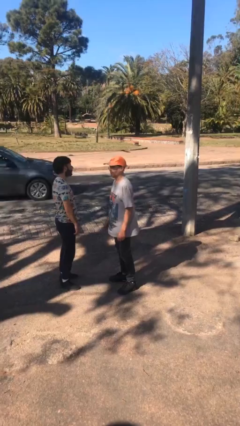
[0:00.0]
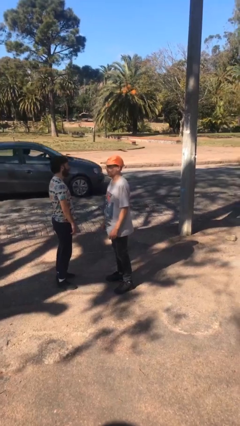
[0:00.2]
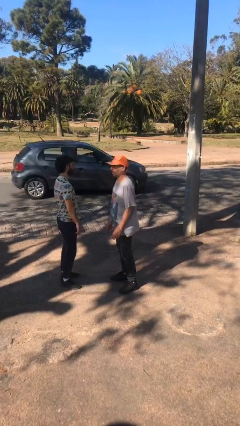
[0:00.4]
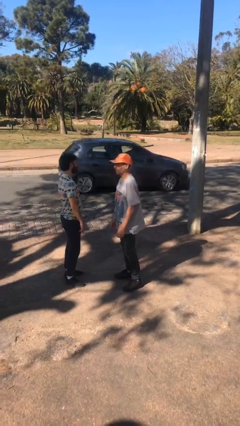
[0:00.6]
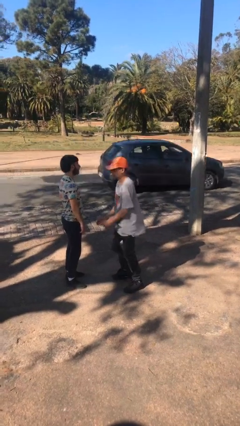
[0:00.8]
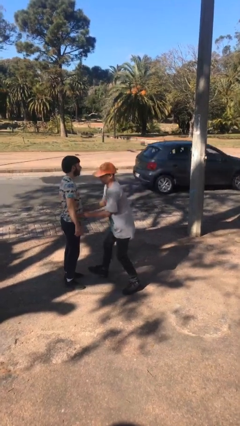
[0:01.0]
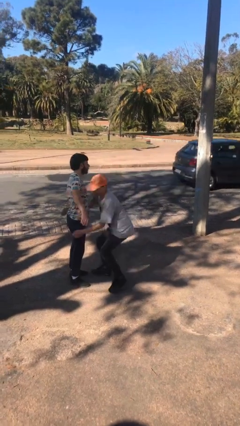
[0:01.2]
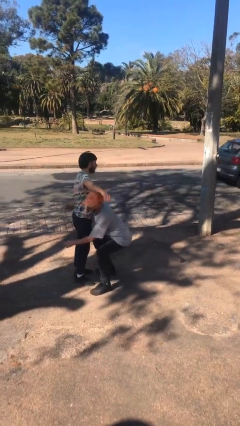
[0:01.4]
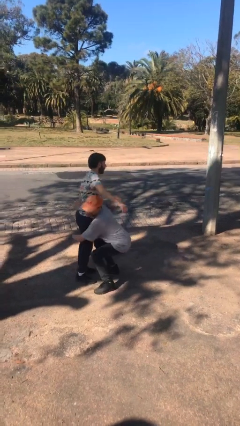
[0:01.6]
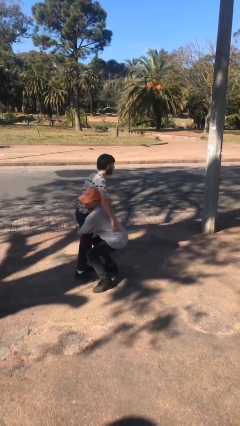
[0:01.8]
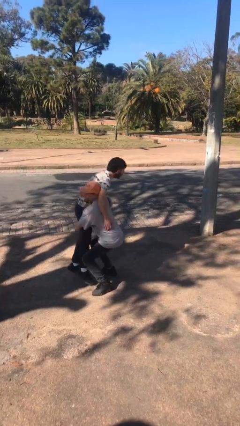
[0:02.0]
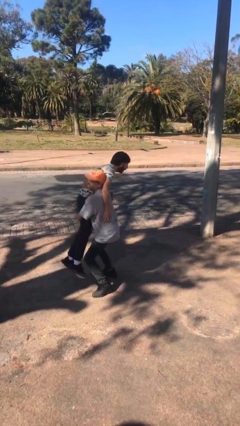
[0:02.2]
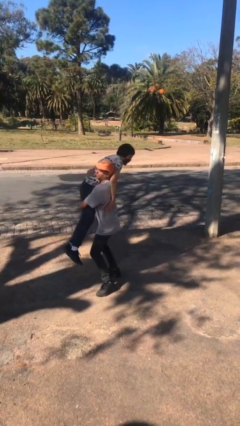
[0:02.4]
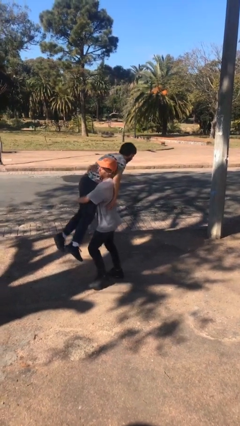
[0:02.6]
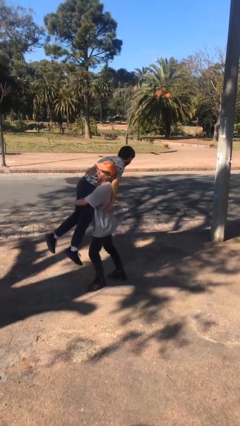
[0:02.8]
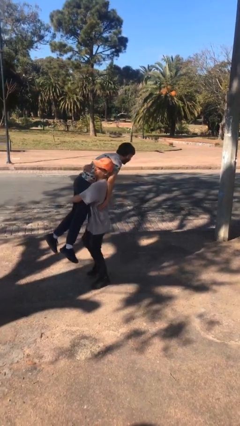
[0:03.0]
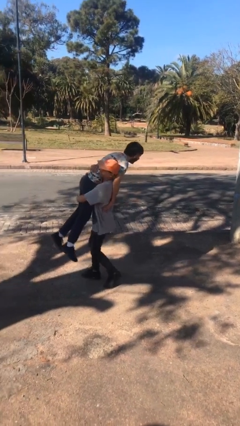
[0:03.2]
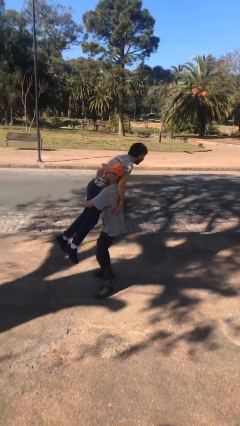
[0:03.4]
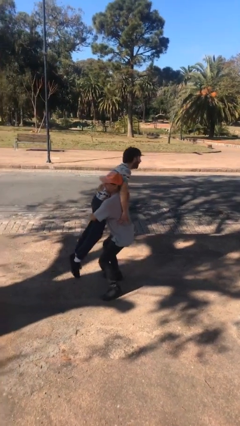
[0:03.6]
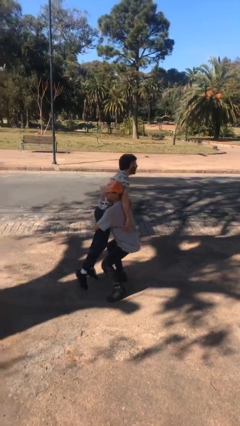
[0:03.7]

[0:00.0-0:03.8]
person carries person over shoulder

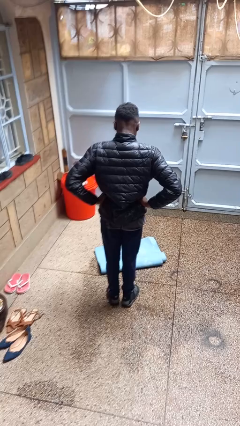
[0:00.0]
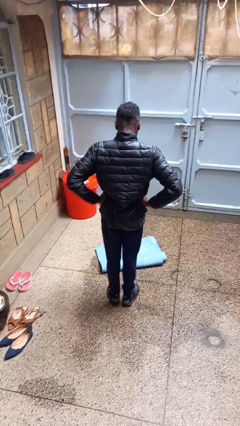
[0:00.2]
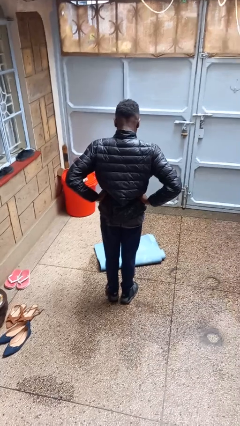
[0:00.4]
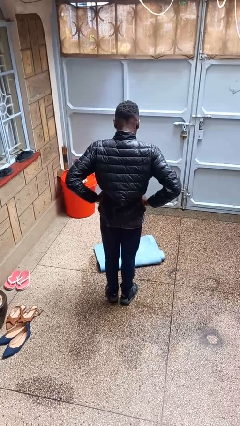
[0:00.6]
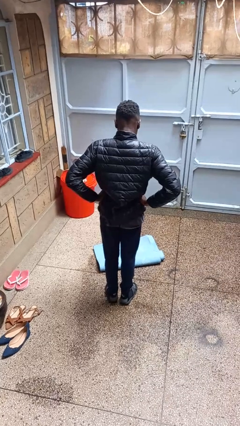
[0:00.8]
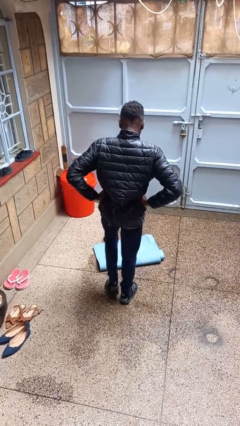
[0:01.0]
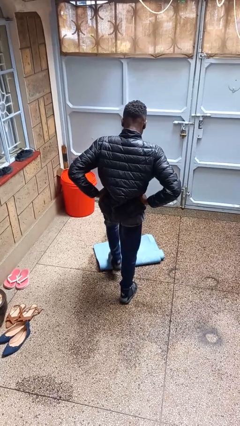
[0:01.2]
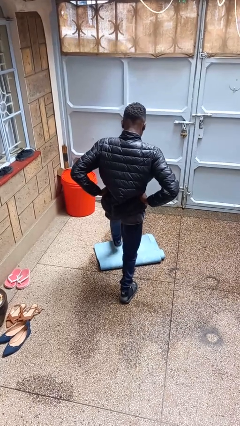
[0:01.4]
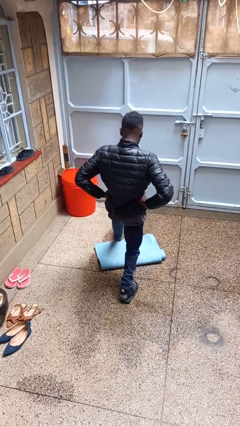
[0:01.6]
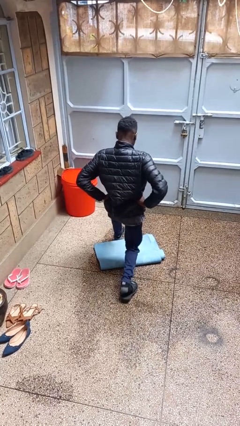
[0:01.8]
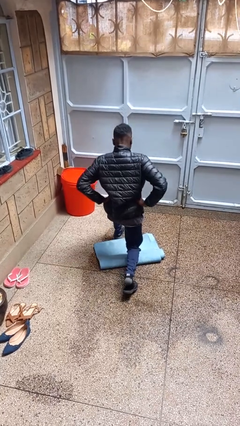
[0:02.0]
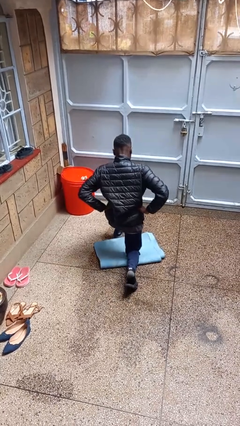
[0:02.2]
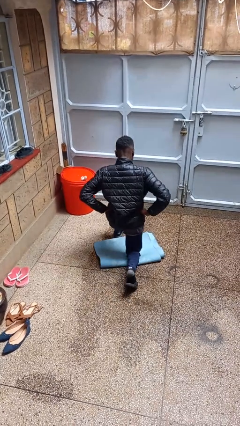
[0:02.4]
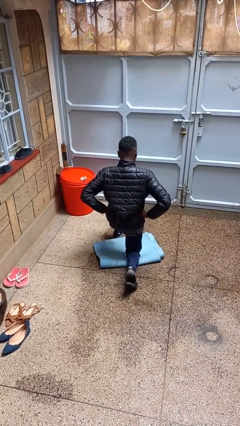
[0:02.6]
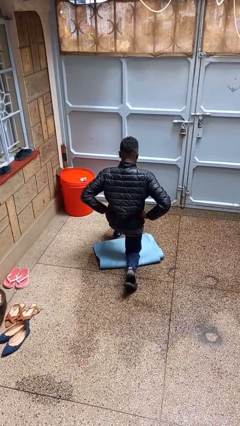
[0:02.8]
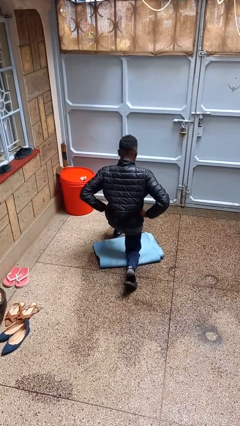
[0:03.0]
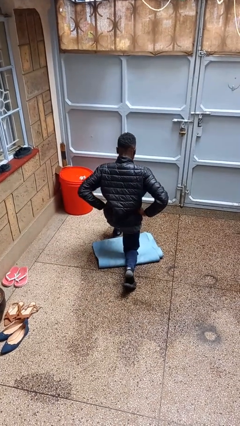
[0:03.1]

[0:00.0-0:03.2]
person exercises with lunges

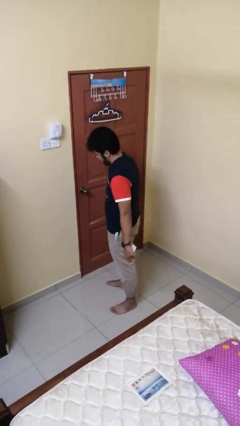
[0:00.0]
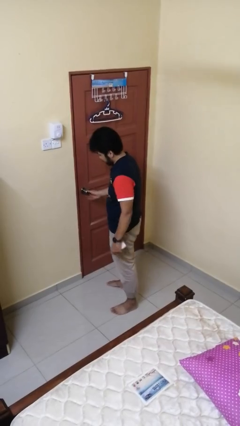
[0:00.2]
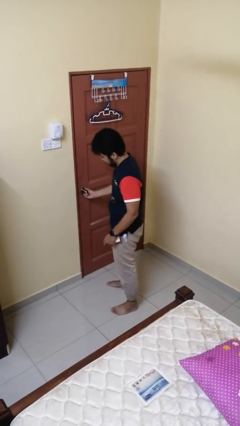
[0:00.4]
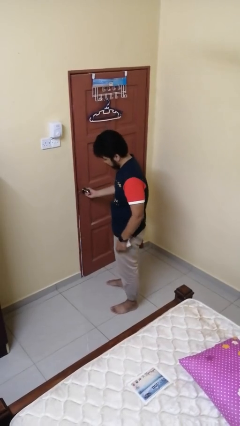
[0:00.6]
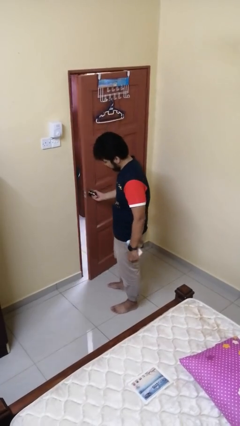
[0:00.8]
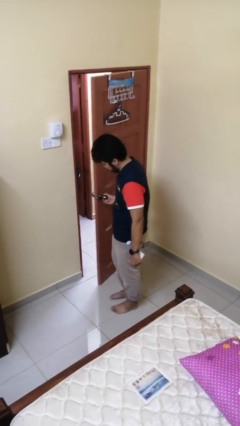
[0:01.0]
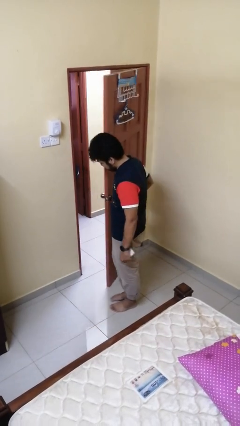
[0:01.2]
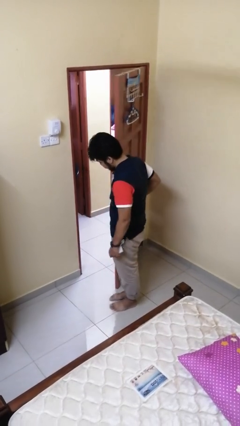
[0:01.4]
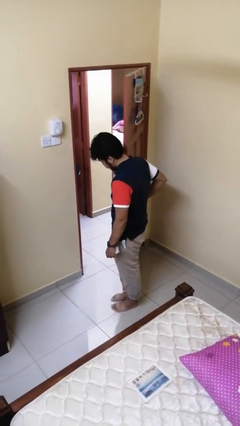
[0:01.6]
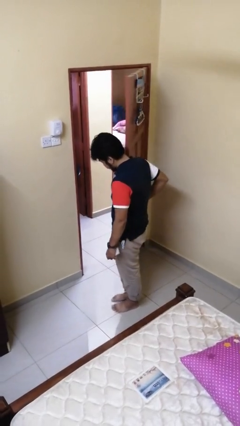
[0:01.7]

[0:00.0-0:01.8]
person opens facility door

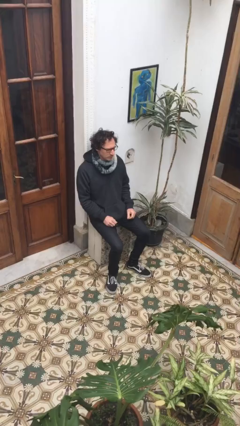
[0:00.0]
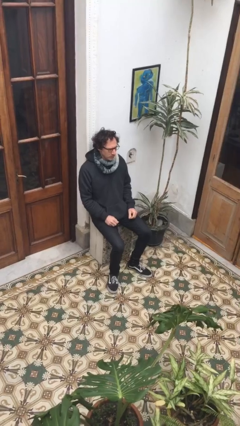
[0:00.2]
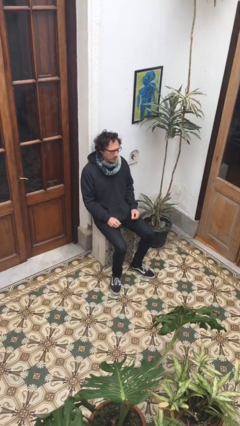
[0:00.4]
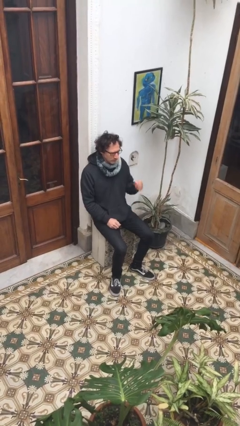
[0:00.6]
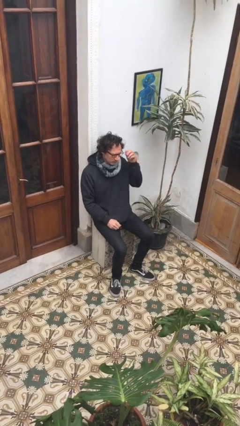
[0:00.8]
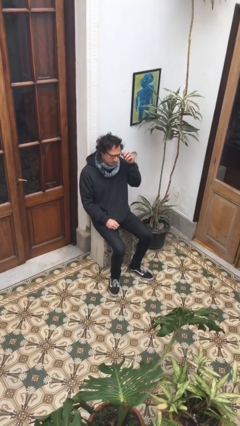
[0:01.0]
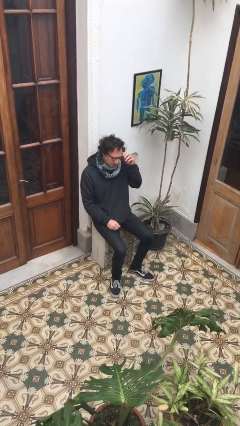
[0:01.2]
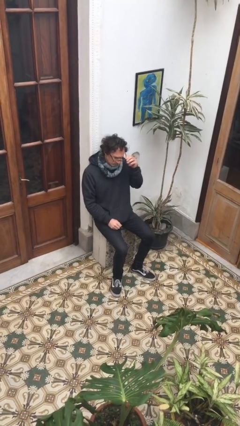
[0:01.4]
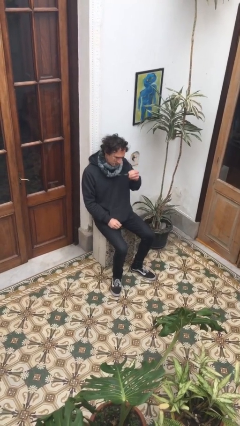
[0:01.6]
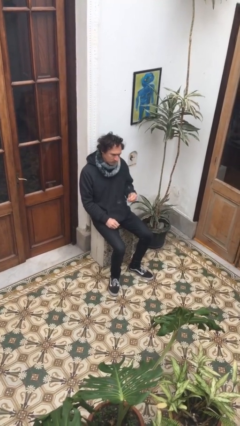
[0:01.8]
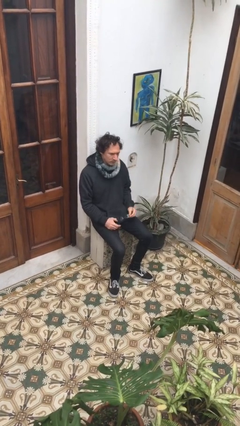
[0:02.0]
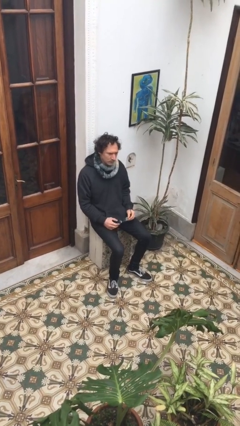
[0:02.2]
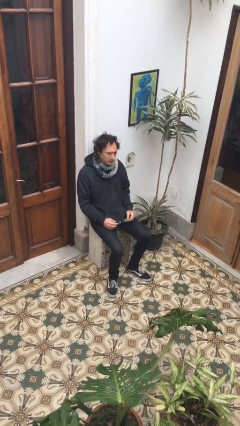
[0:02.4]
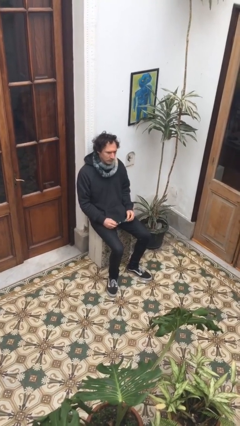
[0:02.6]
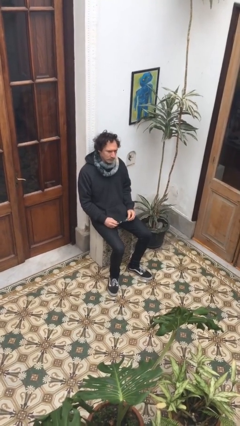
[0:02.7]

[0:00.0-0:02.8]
person takes off glasses

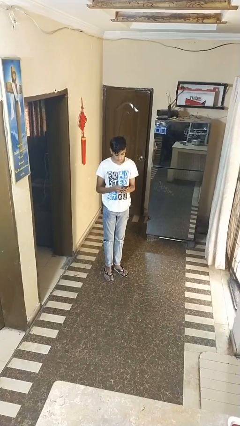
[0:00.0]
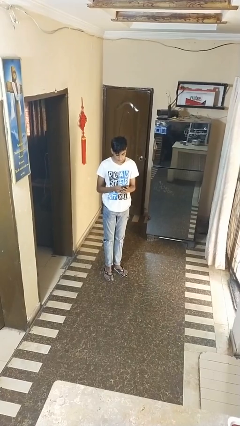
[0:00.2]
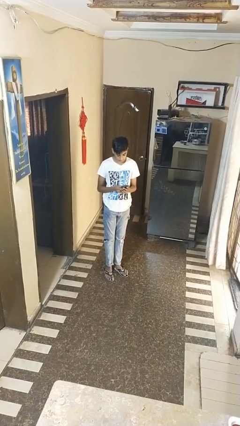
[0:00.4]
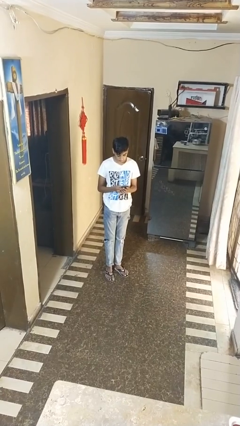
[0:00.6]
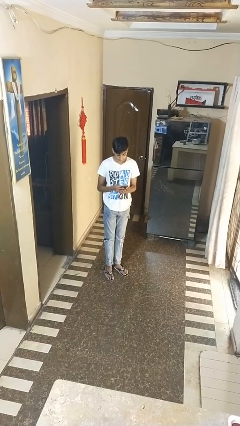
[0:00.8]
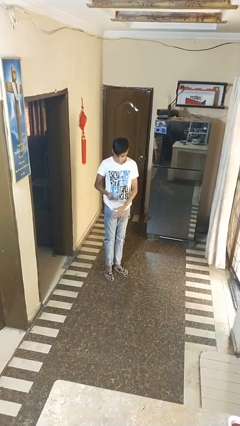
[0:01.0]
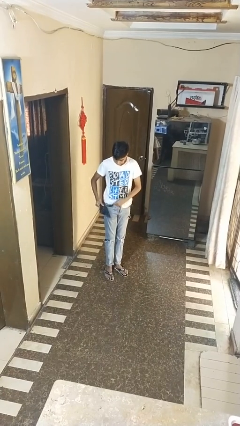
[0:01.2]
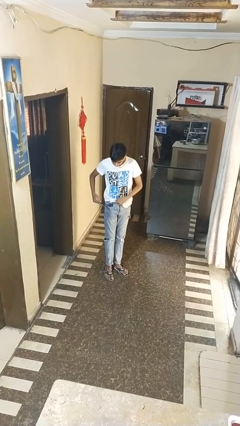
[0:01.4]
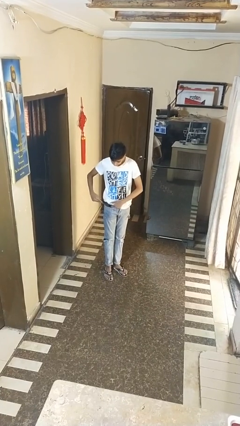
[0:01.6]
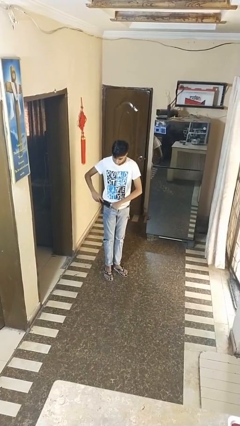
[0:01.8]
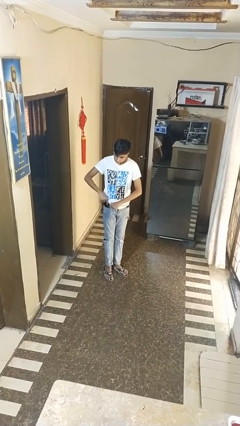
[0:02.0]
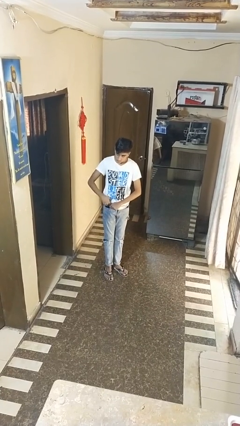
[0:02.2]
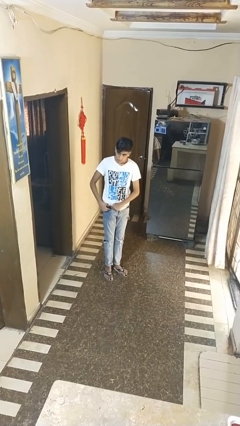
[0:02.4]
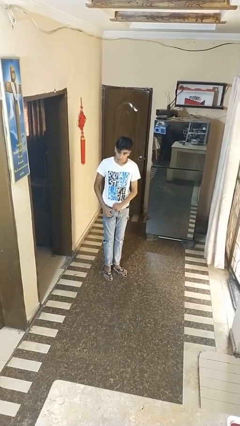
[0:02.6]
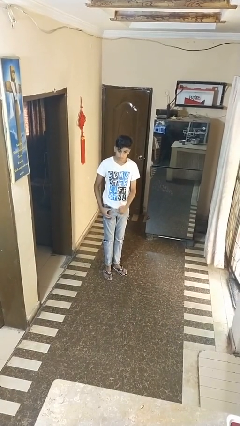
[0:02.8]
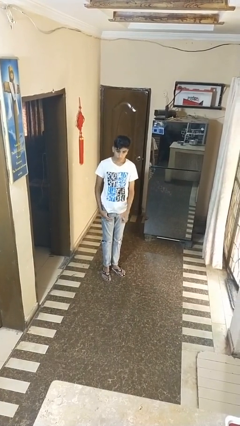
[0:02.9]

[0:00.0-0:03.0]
person puts phone into pocket

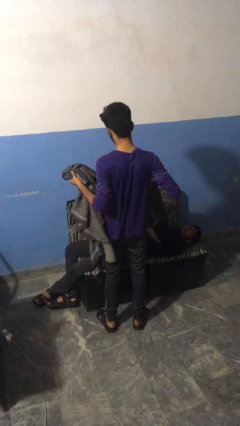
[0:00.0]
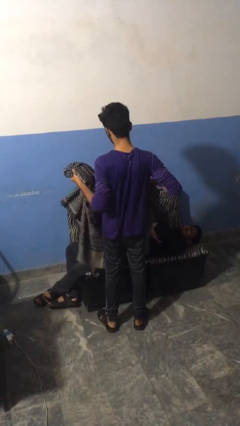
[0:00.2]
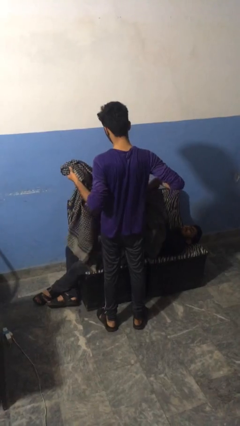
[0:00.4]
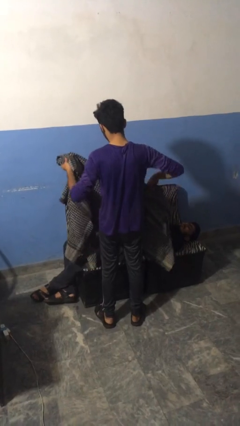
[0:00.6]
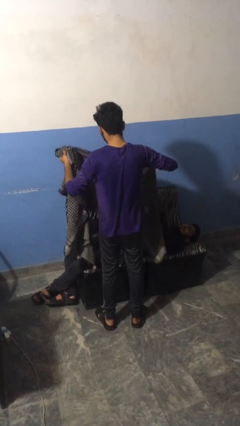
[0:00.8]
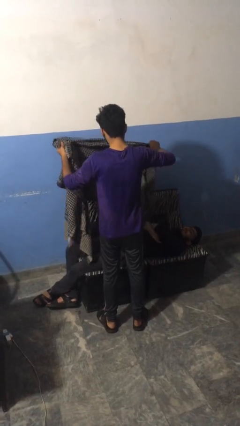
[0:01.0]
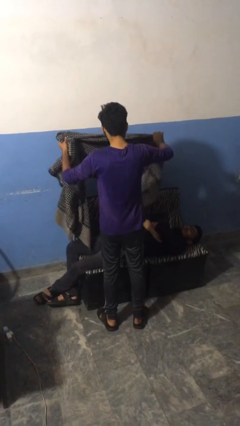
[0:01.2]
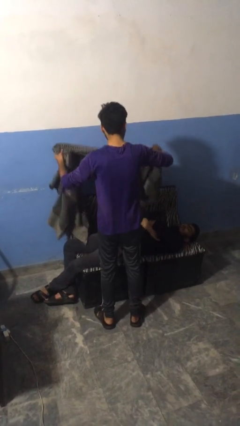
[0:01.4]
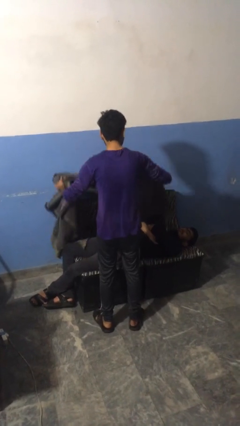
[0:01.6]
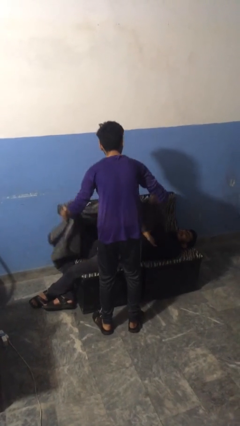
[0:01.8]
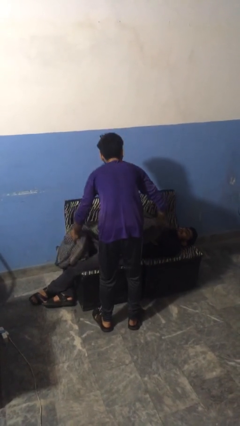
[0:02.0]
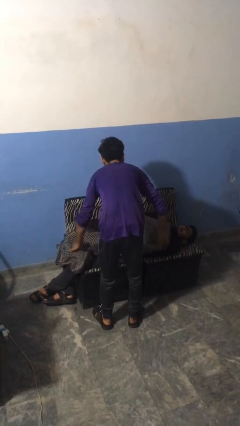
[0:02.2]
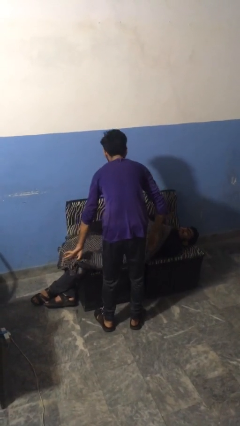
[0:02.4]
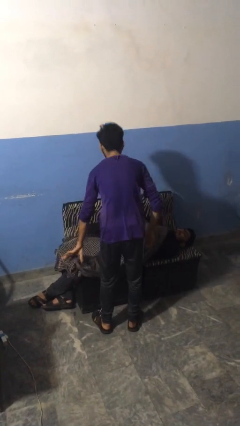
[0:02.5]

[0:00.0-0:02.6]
person covers friend with blanket

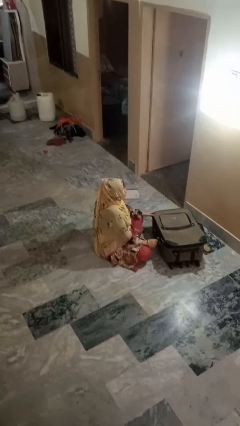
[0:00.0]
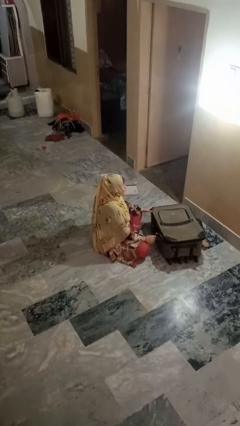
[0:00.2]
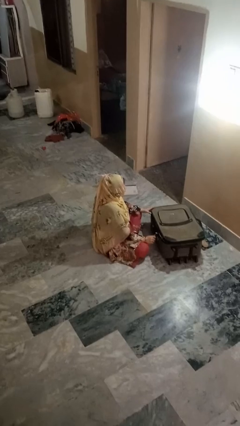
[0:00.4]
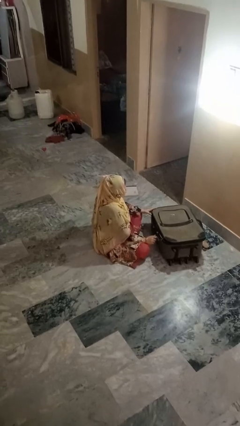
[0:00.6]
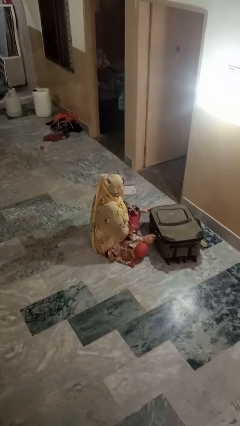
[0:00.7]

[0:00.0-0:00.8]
person closes suitcase
